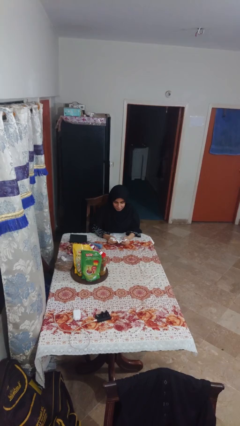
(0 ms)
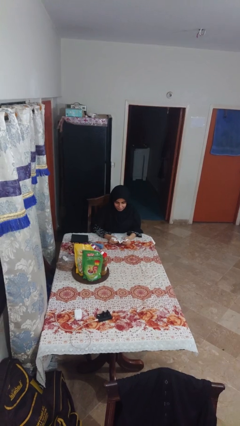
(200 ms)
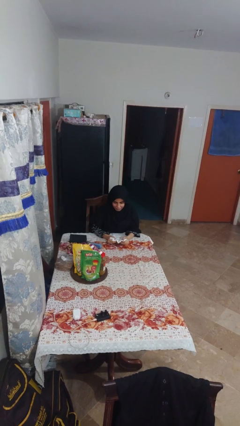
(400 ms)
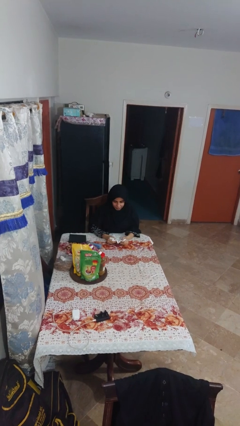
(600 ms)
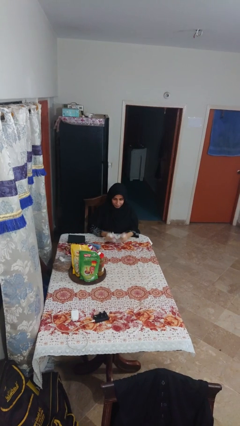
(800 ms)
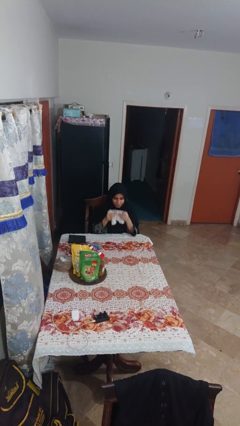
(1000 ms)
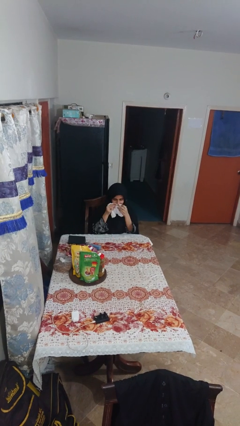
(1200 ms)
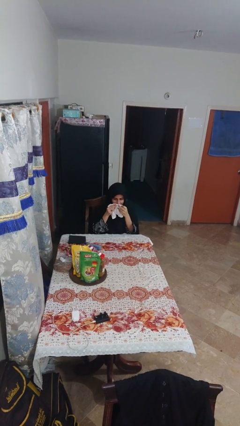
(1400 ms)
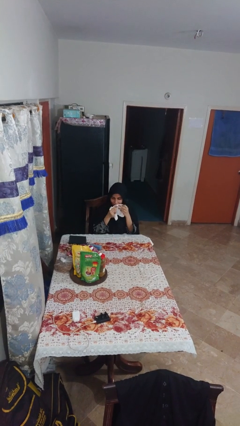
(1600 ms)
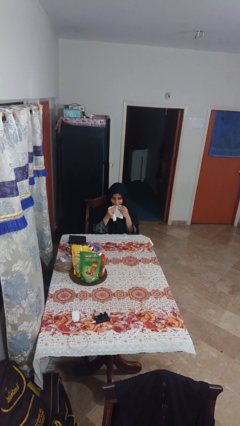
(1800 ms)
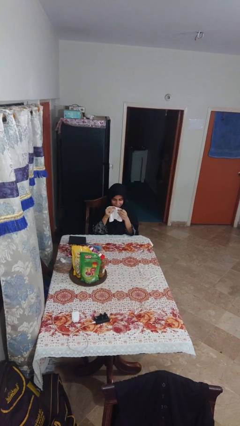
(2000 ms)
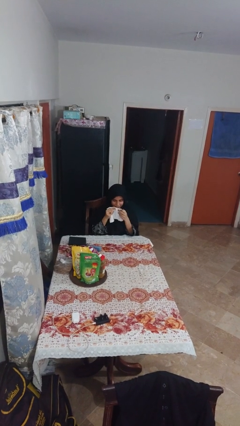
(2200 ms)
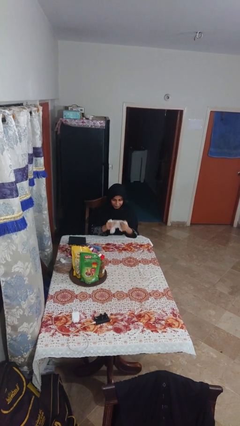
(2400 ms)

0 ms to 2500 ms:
person wipes mouth with napkin

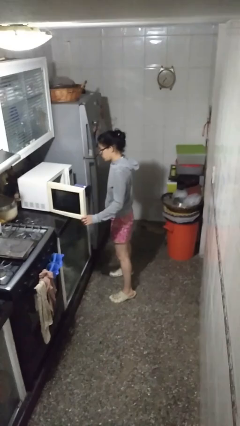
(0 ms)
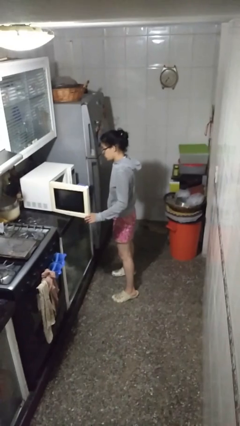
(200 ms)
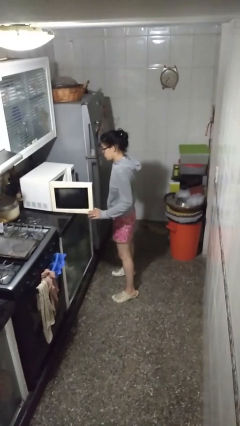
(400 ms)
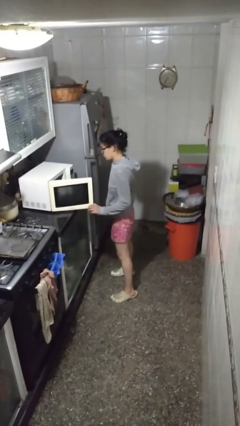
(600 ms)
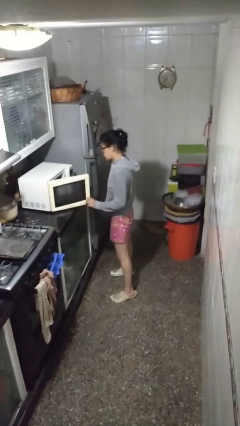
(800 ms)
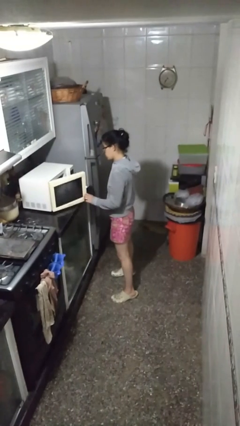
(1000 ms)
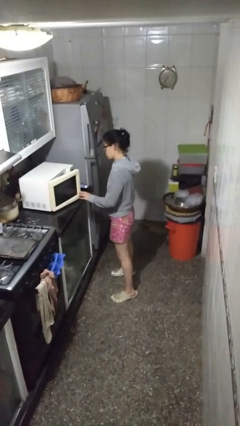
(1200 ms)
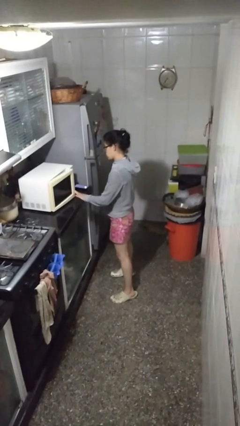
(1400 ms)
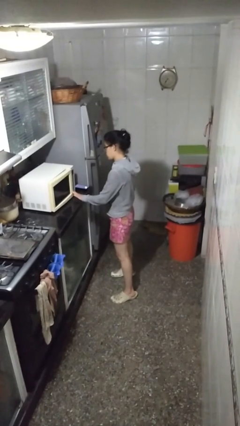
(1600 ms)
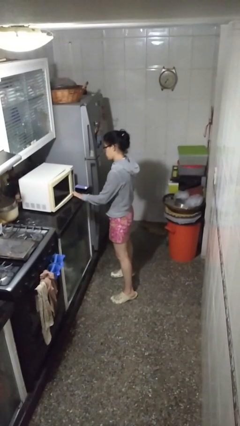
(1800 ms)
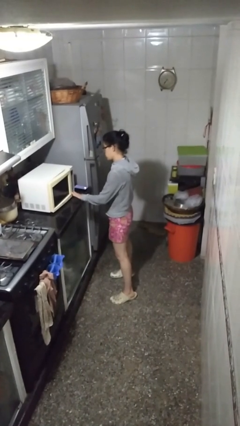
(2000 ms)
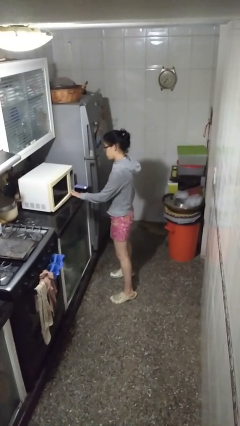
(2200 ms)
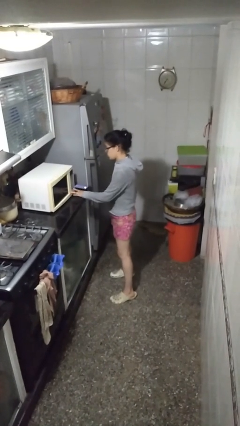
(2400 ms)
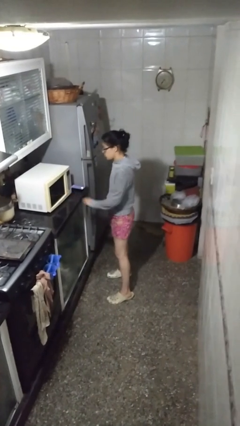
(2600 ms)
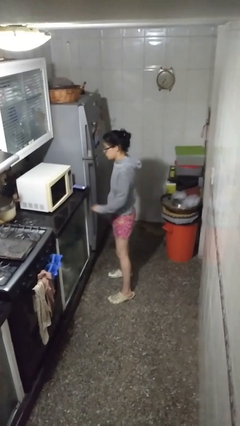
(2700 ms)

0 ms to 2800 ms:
person closes microwave

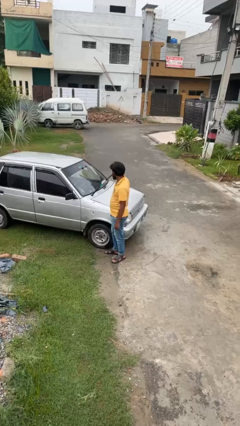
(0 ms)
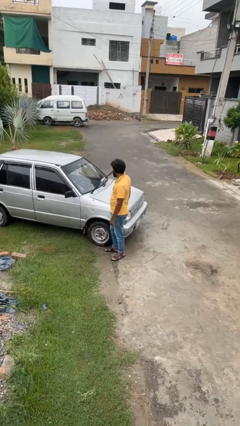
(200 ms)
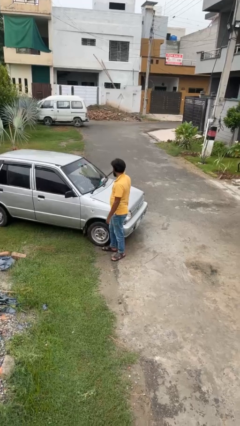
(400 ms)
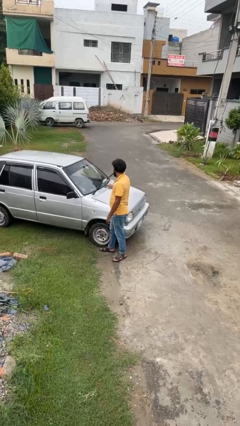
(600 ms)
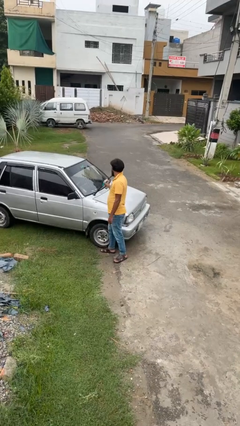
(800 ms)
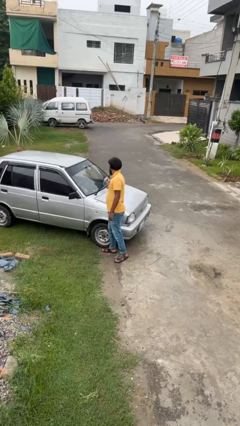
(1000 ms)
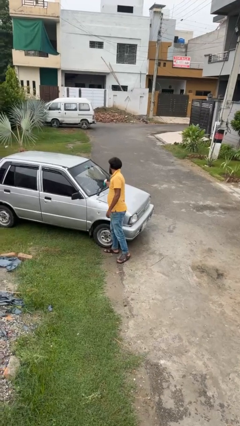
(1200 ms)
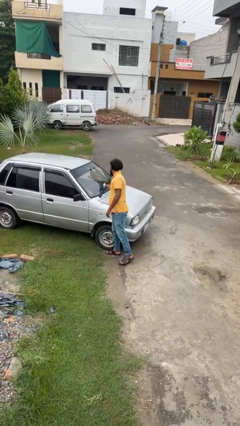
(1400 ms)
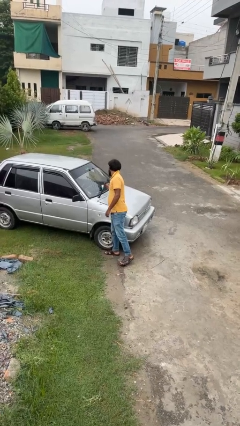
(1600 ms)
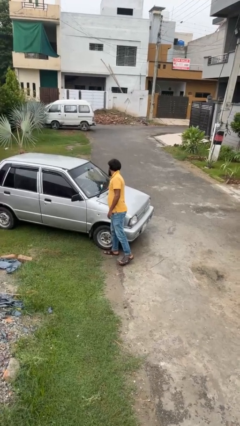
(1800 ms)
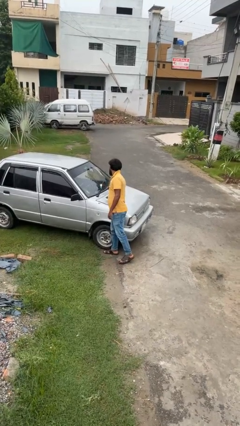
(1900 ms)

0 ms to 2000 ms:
person flips down car wipers

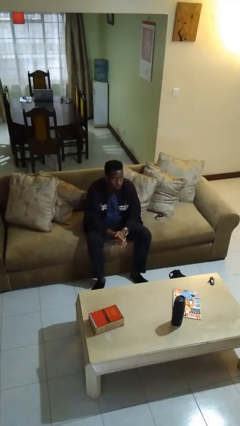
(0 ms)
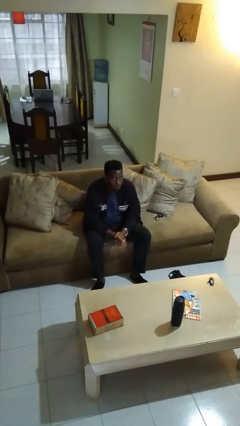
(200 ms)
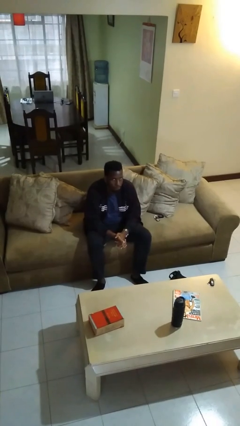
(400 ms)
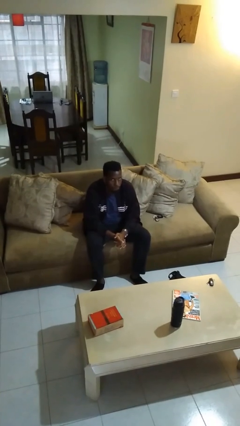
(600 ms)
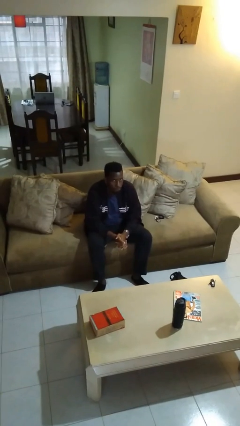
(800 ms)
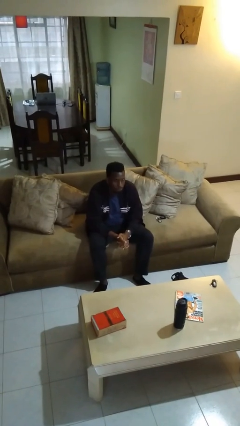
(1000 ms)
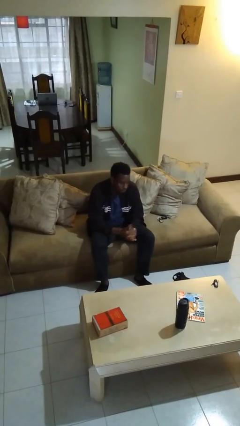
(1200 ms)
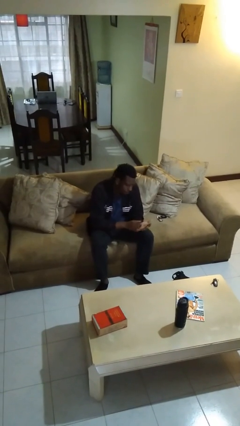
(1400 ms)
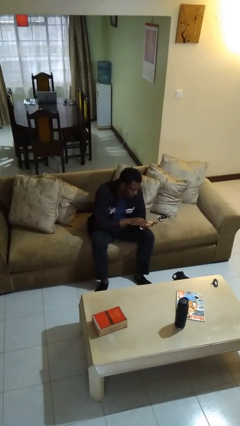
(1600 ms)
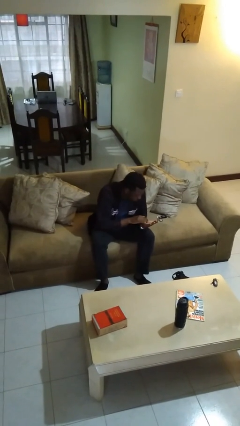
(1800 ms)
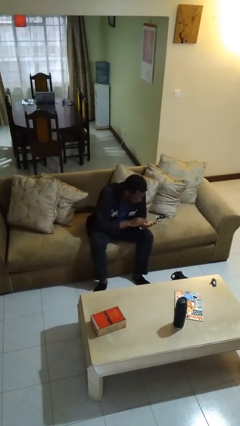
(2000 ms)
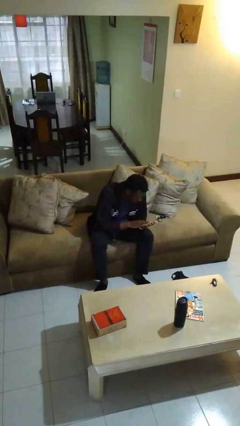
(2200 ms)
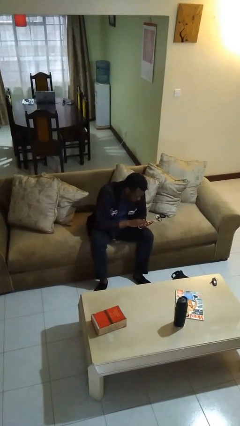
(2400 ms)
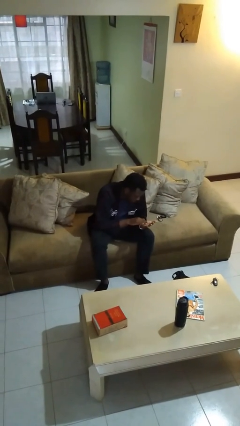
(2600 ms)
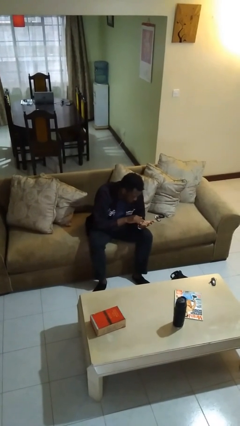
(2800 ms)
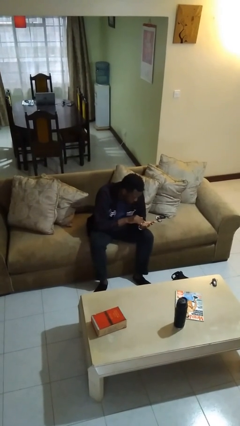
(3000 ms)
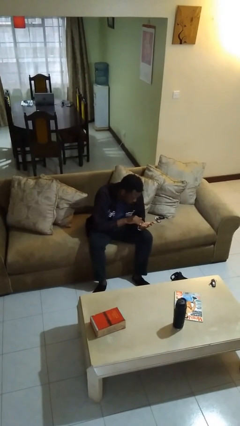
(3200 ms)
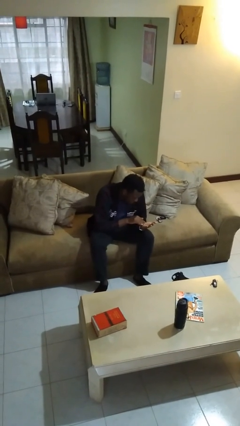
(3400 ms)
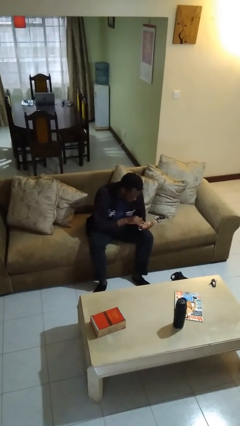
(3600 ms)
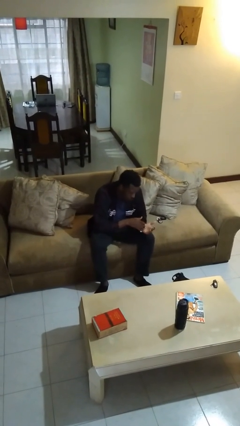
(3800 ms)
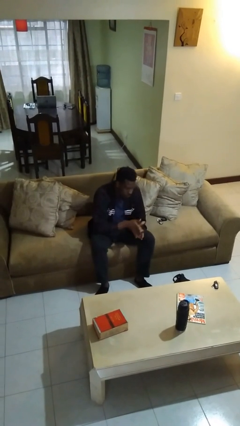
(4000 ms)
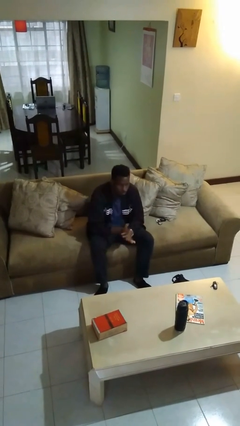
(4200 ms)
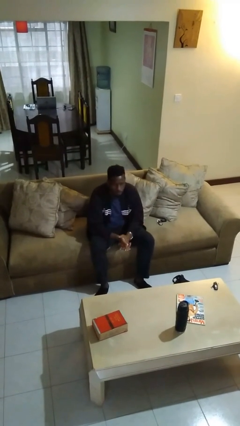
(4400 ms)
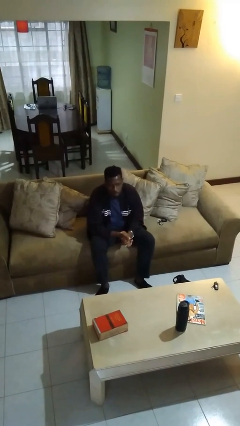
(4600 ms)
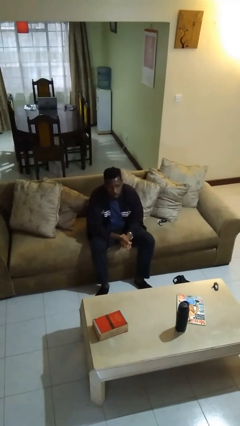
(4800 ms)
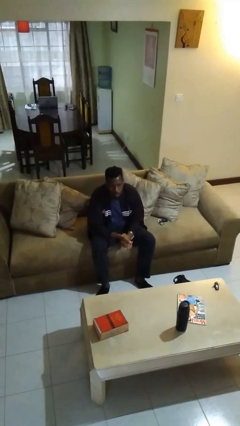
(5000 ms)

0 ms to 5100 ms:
person looks at hands in lap

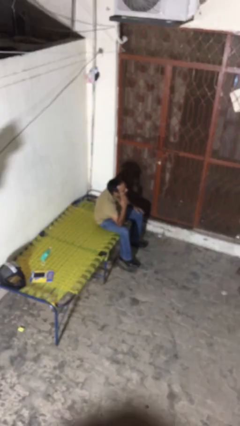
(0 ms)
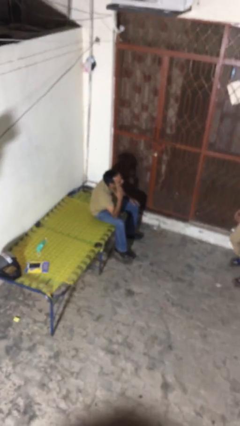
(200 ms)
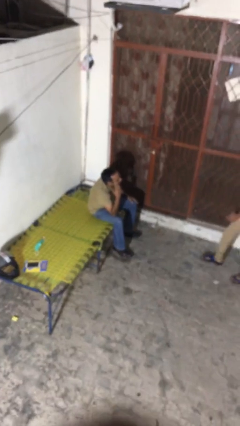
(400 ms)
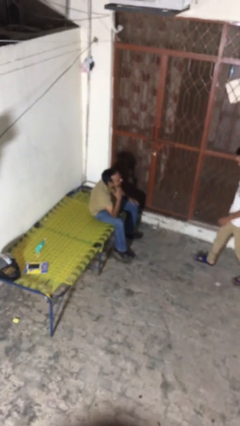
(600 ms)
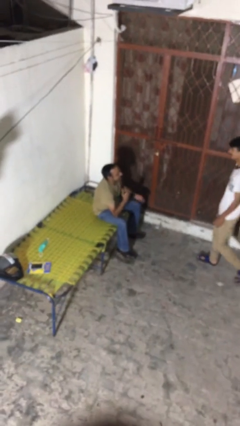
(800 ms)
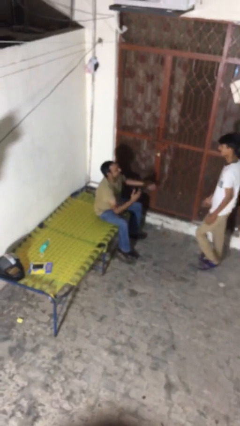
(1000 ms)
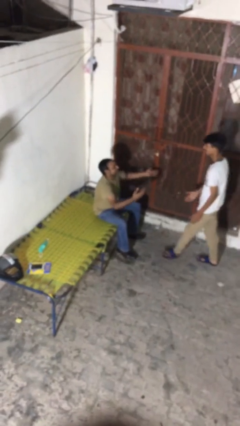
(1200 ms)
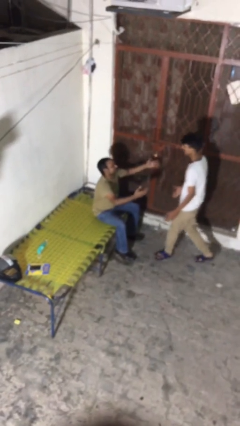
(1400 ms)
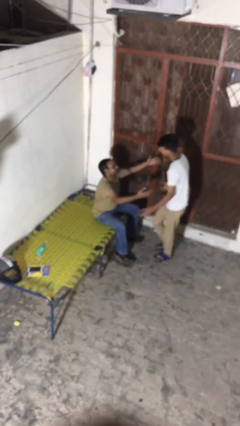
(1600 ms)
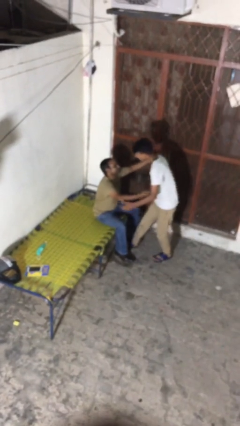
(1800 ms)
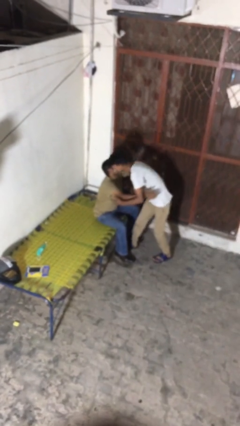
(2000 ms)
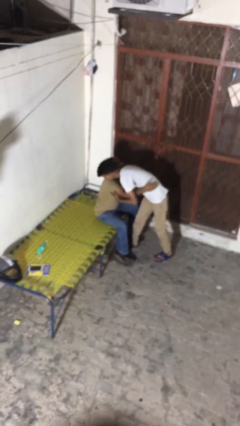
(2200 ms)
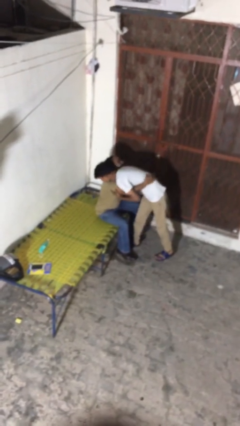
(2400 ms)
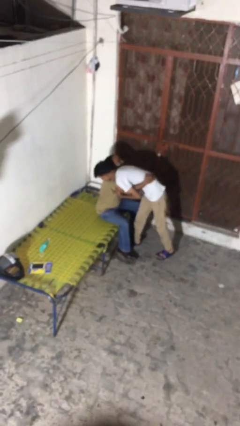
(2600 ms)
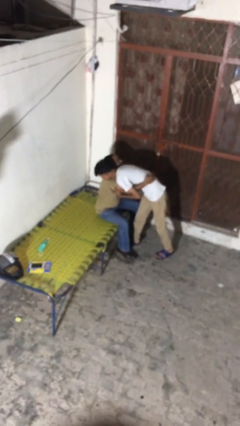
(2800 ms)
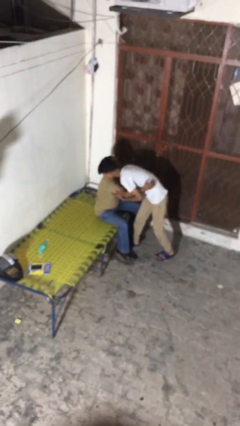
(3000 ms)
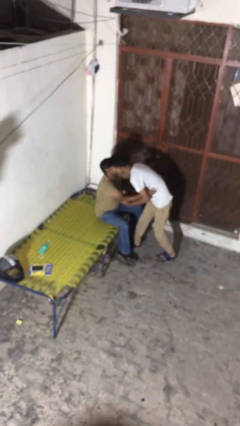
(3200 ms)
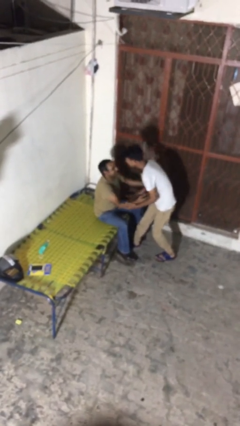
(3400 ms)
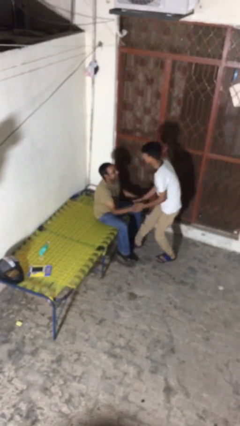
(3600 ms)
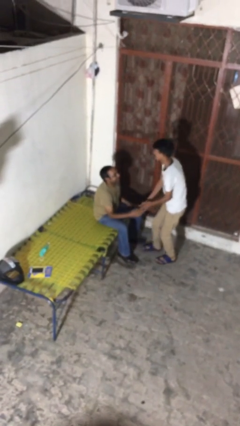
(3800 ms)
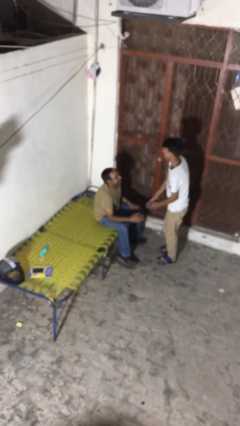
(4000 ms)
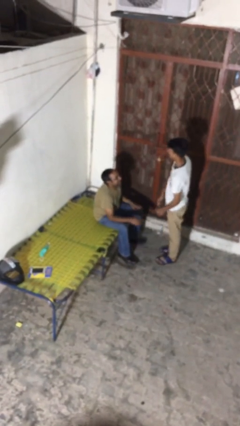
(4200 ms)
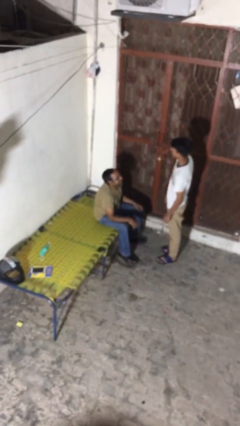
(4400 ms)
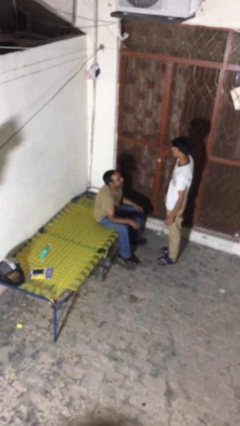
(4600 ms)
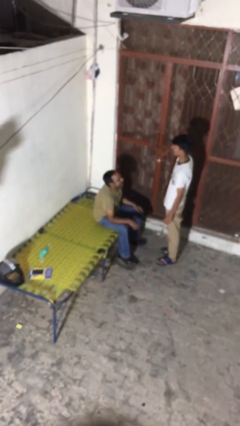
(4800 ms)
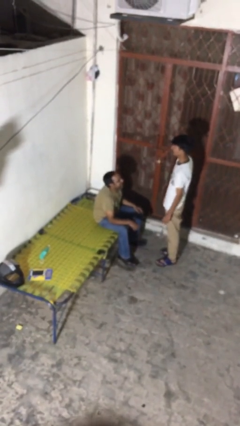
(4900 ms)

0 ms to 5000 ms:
person embraces person

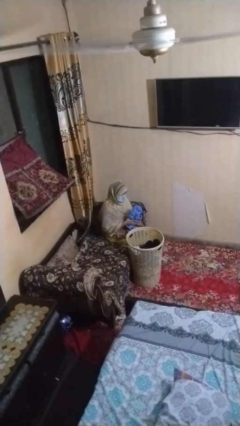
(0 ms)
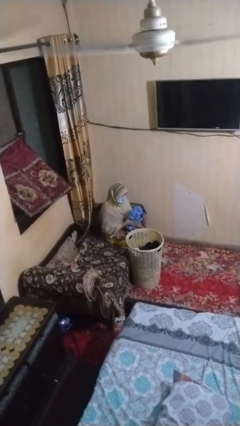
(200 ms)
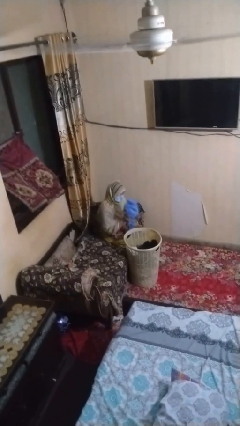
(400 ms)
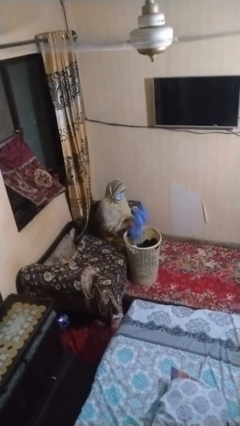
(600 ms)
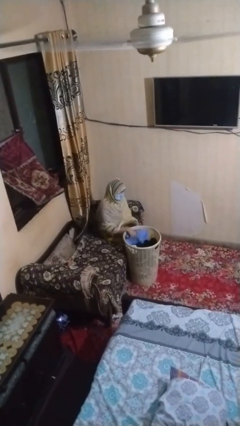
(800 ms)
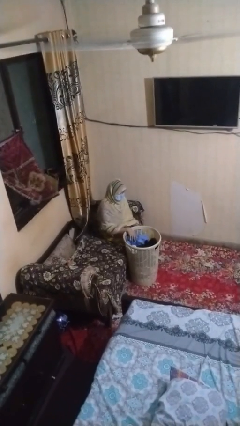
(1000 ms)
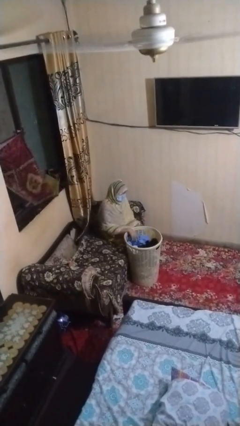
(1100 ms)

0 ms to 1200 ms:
person puts object into basket
